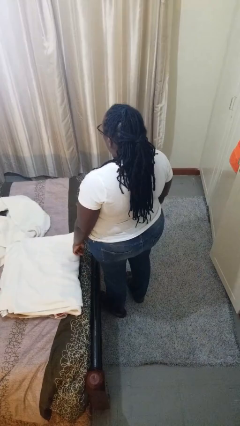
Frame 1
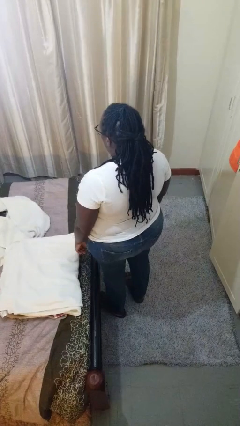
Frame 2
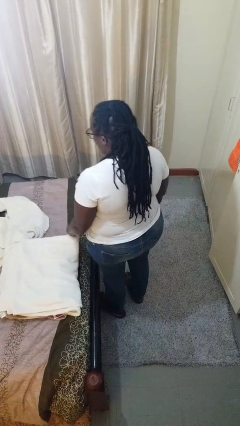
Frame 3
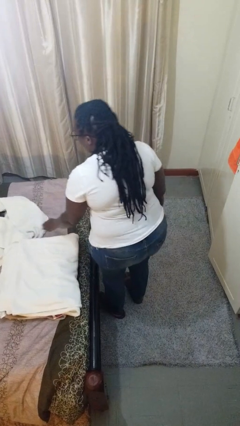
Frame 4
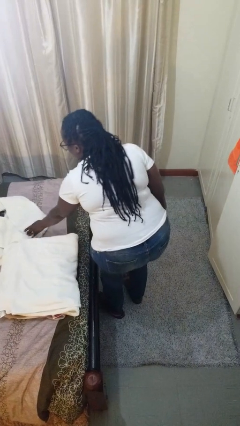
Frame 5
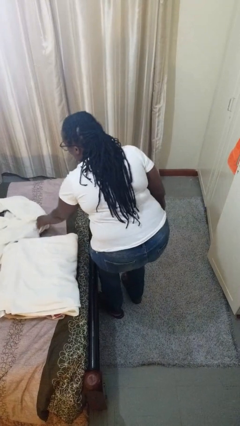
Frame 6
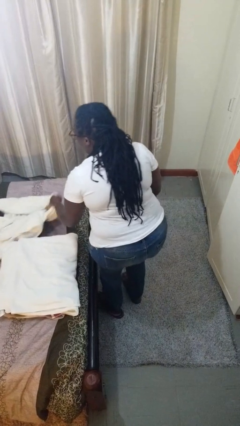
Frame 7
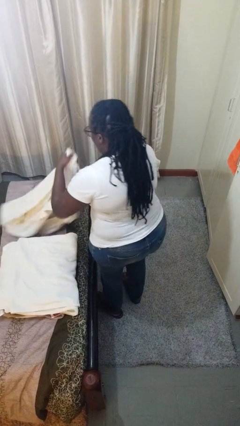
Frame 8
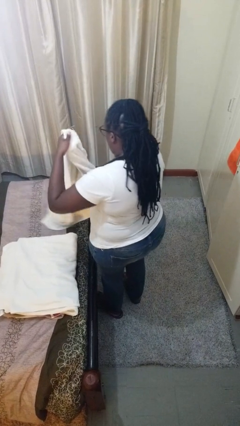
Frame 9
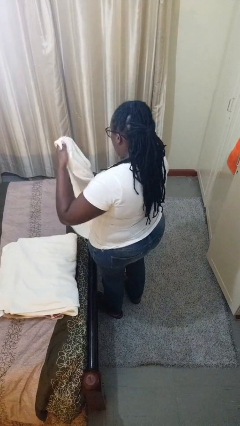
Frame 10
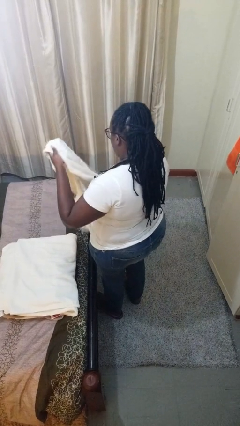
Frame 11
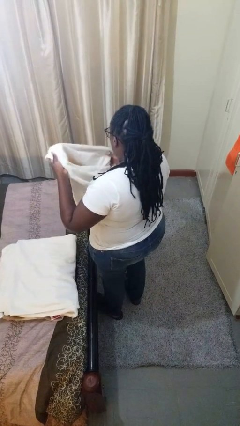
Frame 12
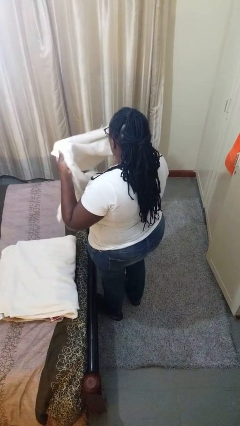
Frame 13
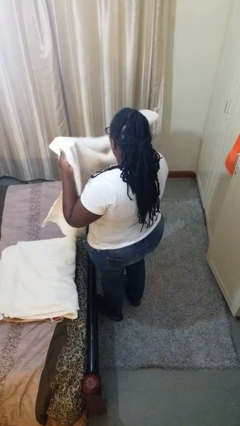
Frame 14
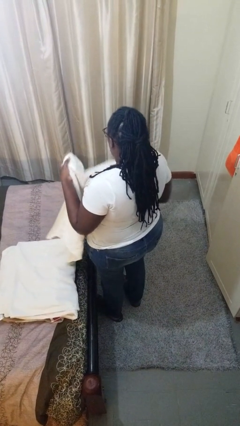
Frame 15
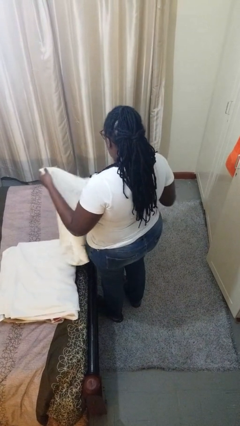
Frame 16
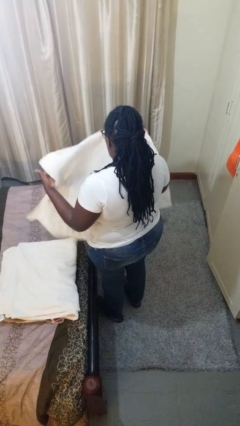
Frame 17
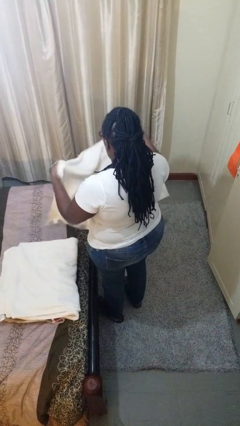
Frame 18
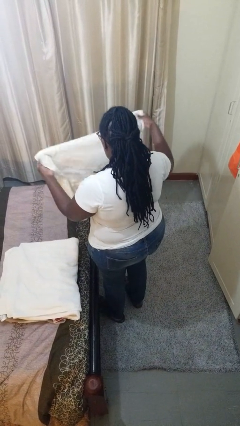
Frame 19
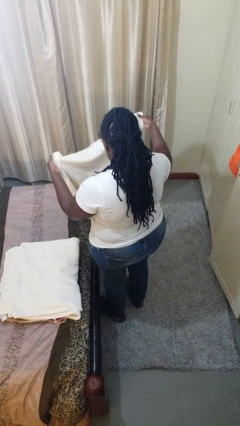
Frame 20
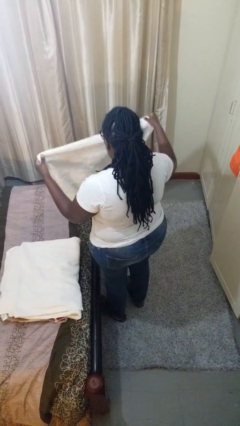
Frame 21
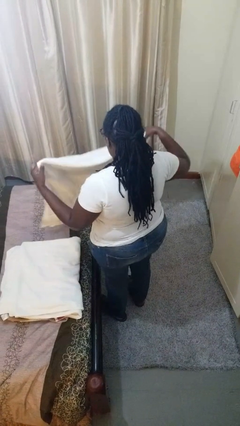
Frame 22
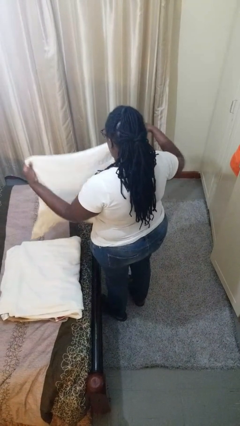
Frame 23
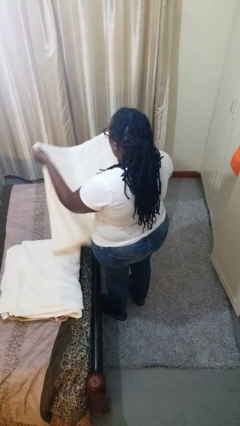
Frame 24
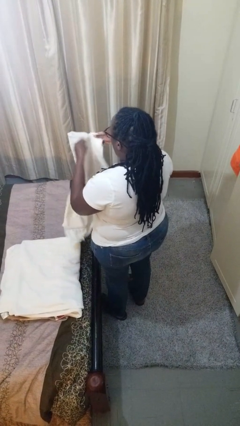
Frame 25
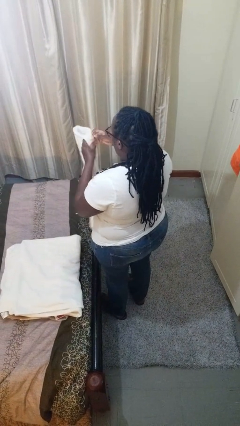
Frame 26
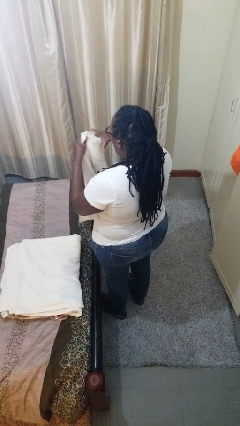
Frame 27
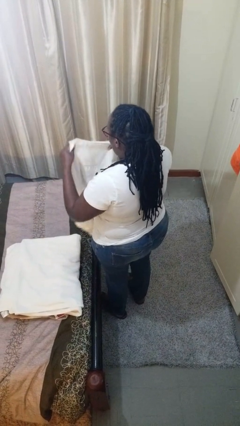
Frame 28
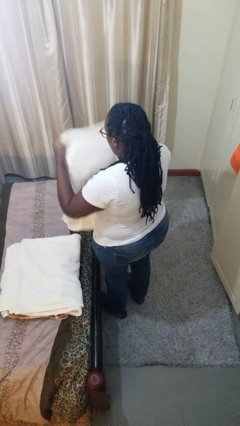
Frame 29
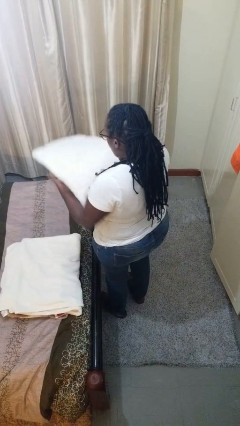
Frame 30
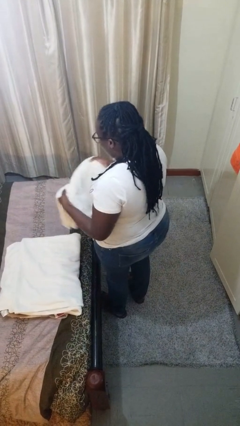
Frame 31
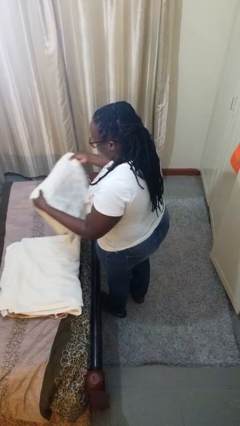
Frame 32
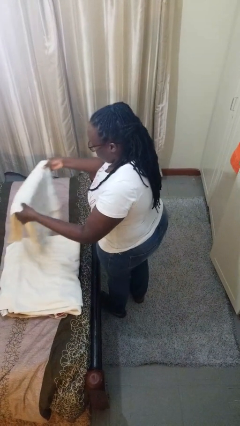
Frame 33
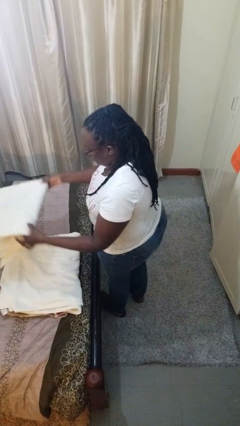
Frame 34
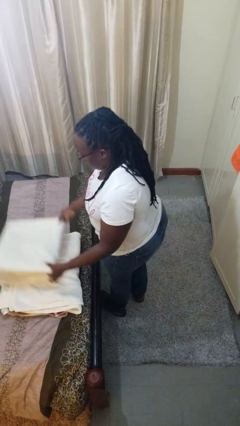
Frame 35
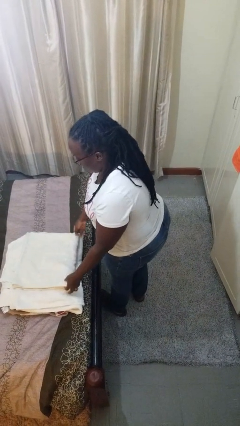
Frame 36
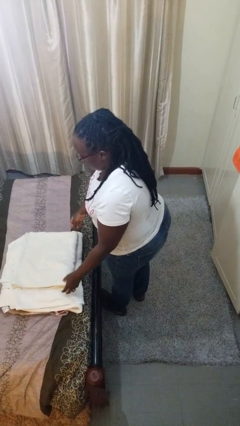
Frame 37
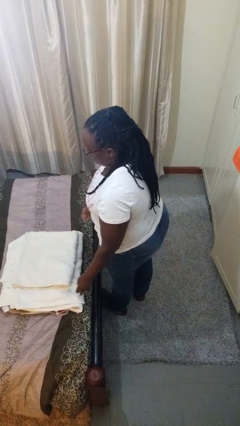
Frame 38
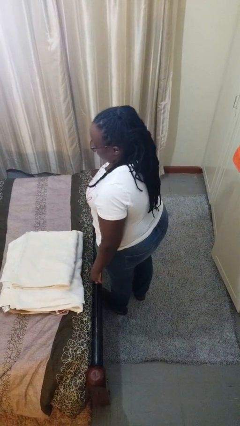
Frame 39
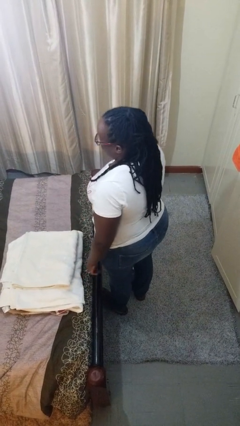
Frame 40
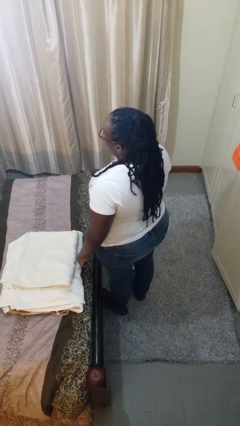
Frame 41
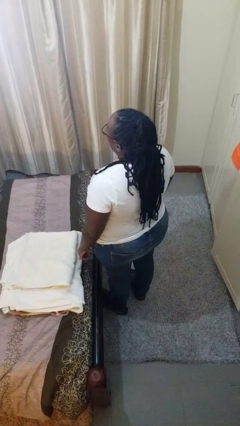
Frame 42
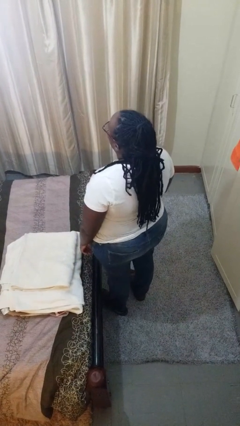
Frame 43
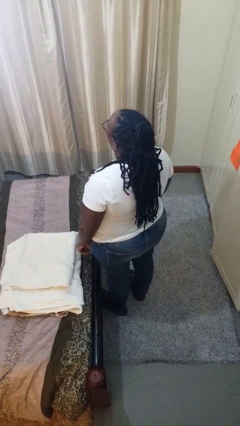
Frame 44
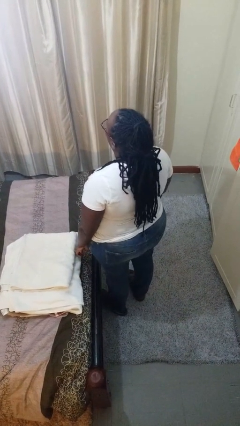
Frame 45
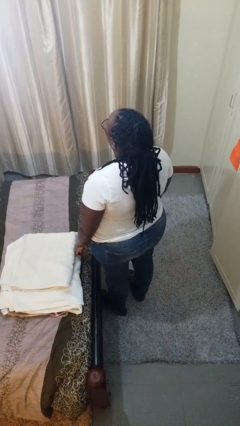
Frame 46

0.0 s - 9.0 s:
person folds towel

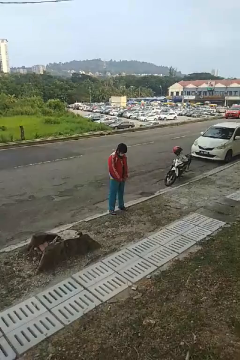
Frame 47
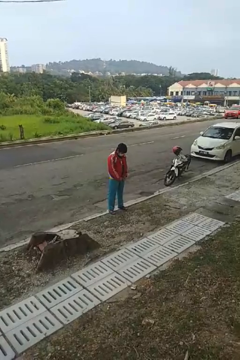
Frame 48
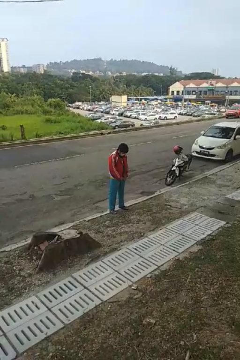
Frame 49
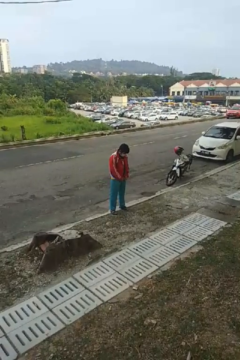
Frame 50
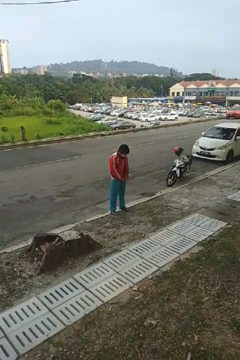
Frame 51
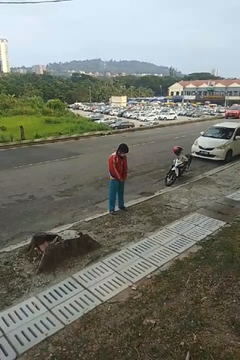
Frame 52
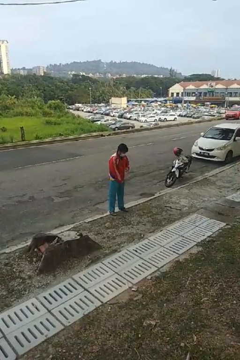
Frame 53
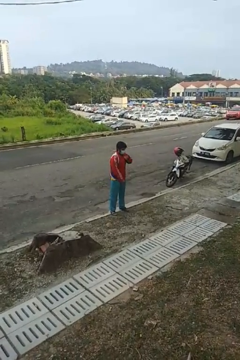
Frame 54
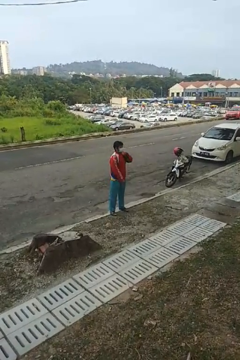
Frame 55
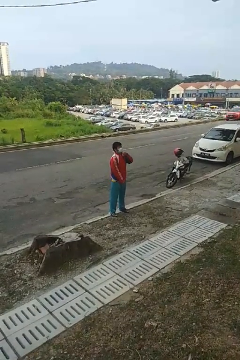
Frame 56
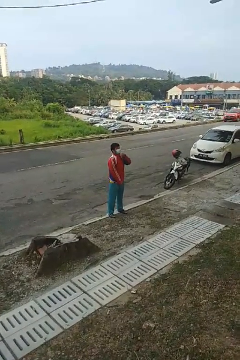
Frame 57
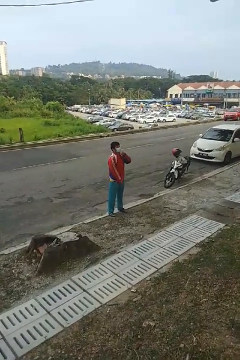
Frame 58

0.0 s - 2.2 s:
person zips up jacket

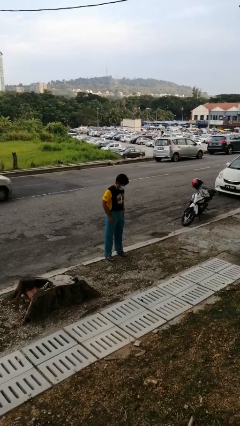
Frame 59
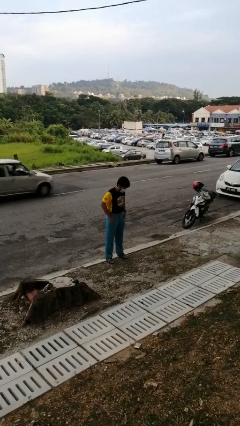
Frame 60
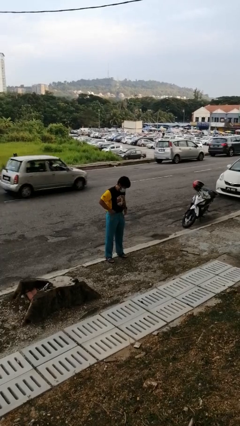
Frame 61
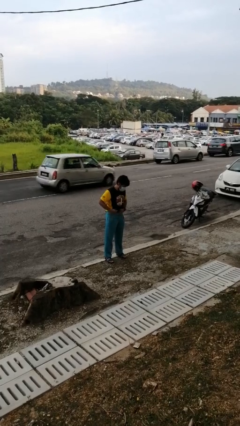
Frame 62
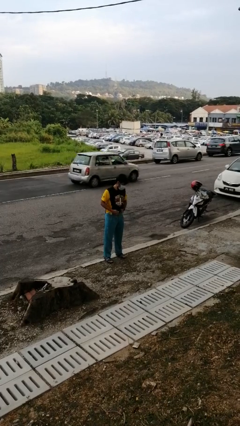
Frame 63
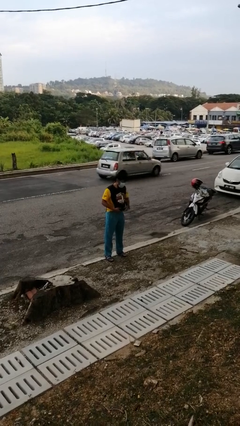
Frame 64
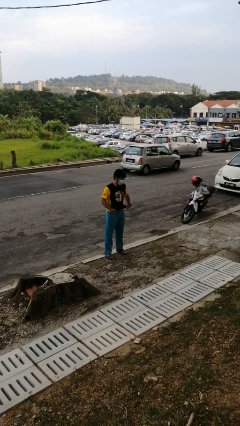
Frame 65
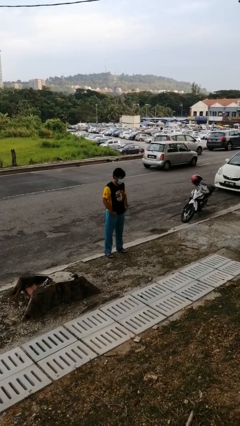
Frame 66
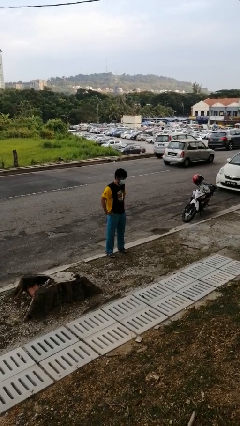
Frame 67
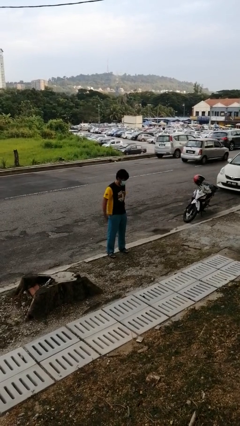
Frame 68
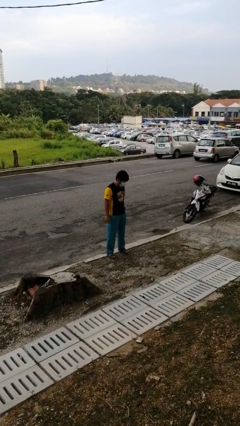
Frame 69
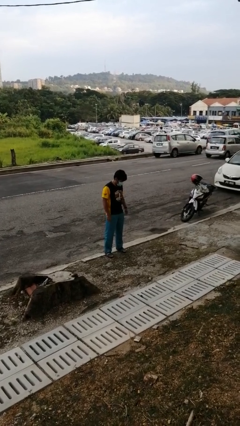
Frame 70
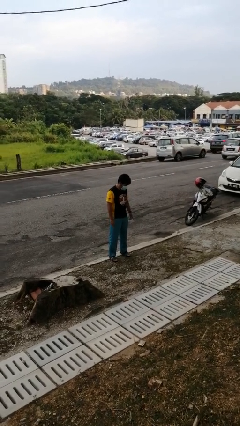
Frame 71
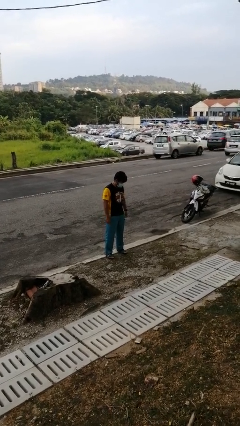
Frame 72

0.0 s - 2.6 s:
person untucks shirt

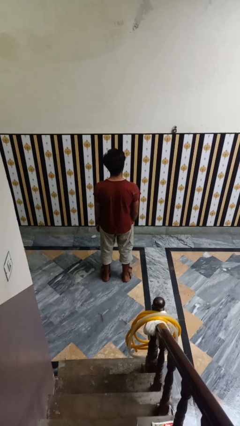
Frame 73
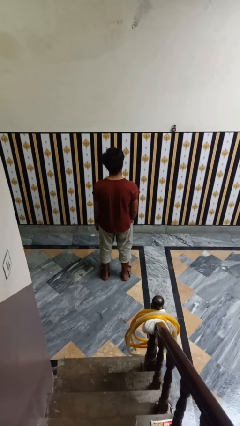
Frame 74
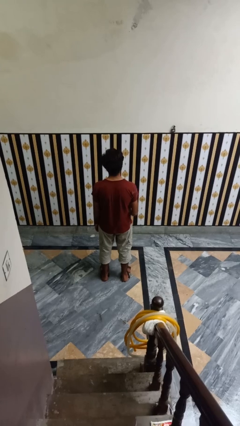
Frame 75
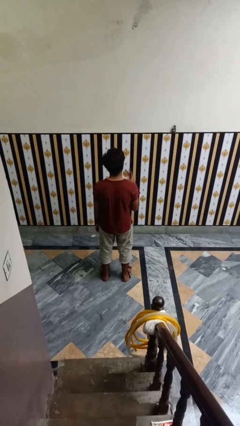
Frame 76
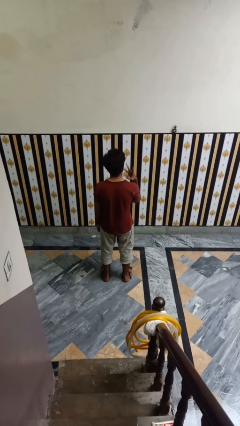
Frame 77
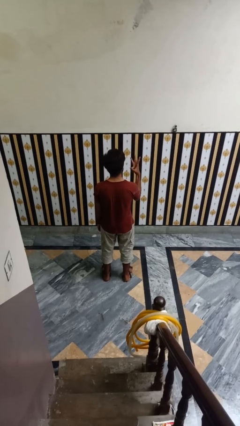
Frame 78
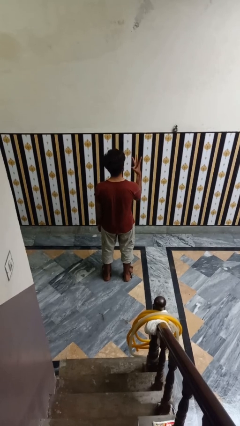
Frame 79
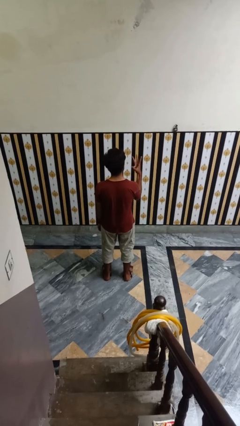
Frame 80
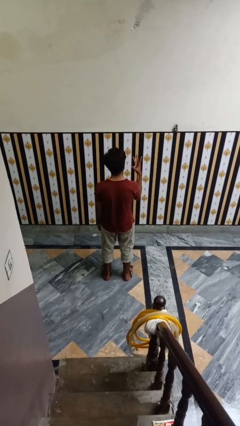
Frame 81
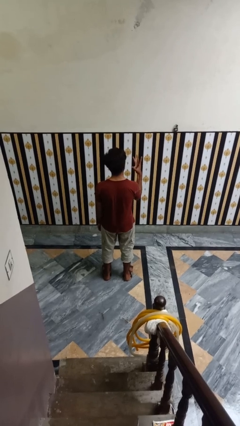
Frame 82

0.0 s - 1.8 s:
person gestures number three

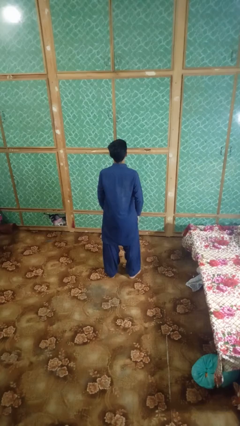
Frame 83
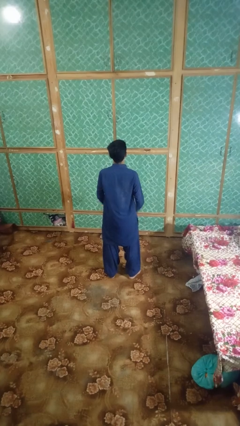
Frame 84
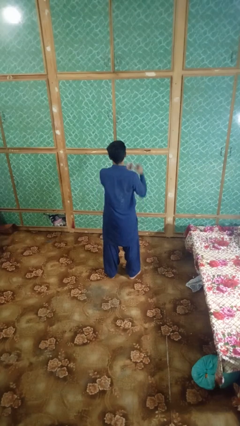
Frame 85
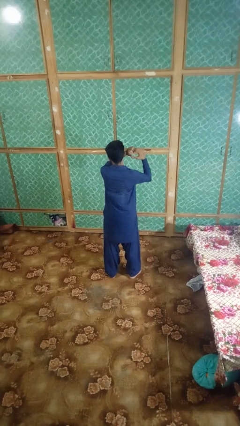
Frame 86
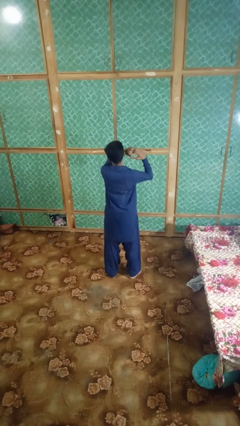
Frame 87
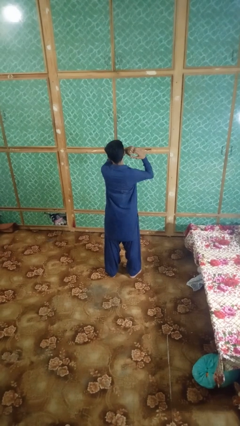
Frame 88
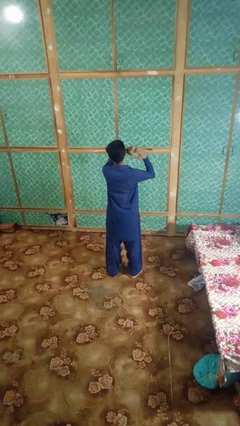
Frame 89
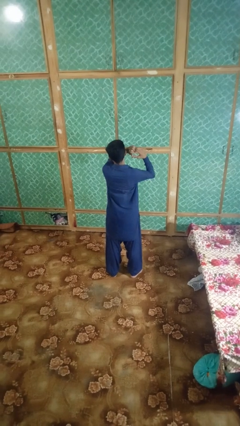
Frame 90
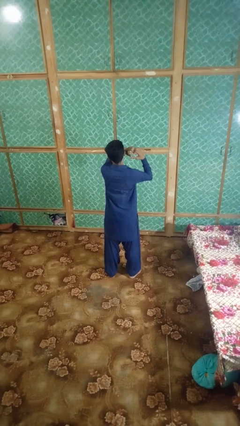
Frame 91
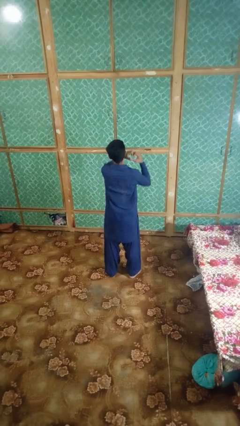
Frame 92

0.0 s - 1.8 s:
person gestures heart

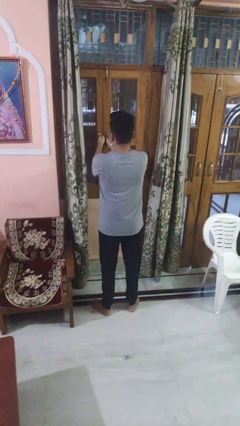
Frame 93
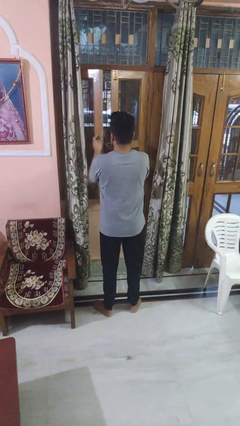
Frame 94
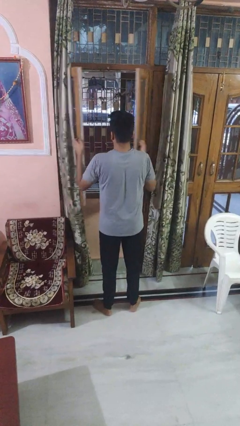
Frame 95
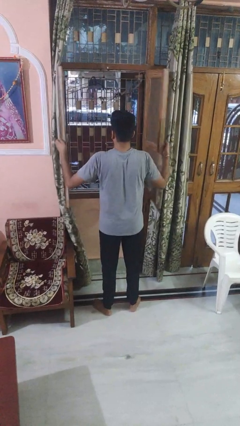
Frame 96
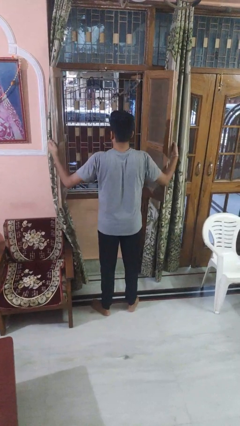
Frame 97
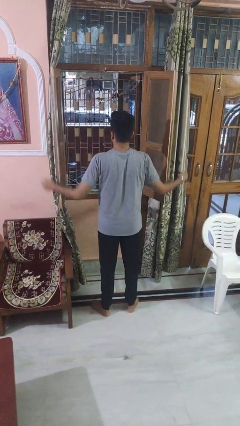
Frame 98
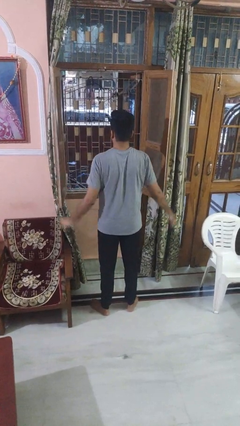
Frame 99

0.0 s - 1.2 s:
person opens home window
